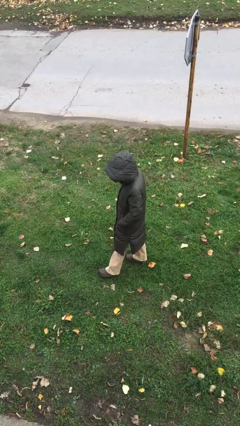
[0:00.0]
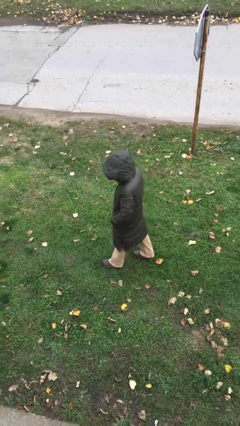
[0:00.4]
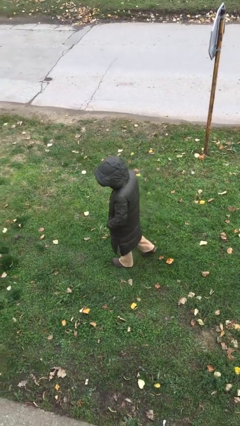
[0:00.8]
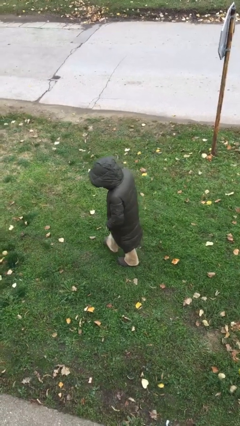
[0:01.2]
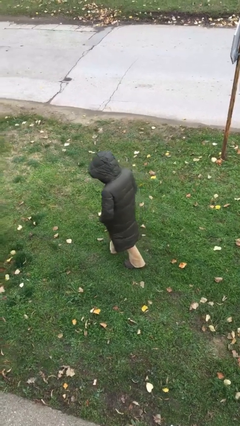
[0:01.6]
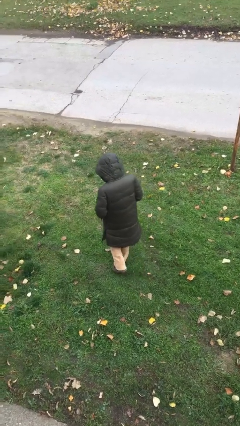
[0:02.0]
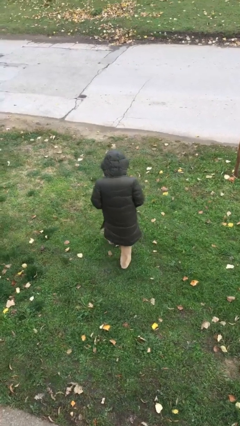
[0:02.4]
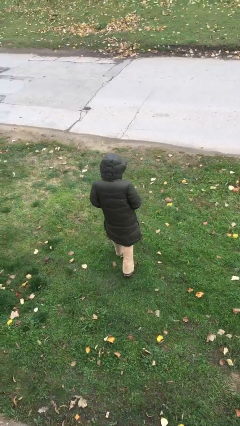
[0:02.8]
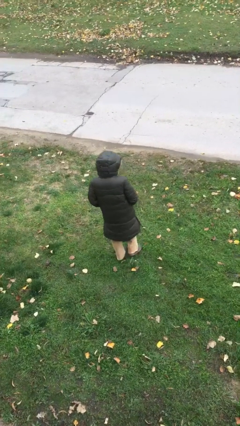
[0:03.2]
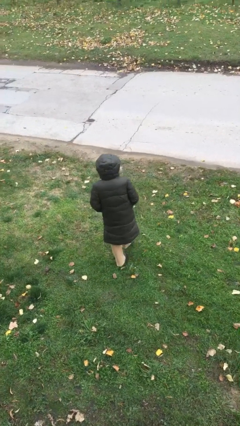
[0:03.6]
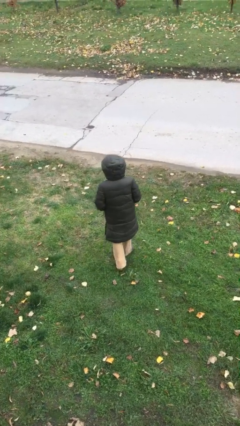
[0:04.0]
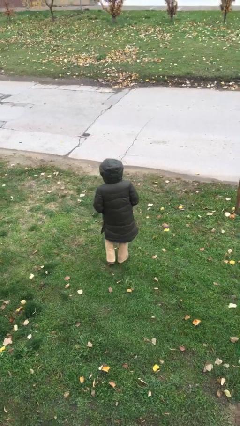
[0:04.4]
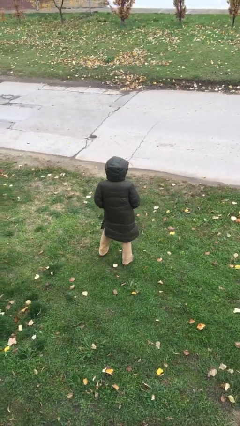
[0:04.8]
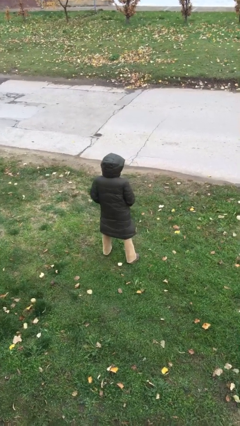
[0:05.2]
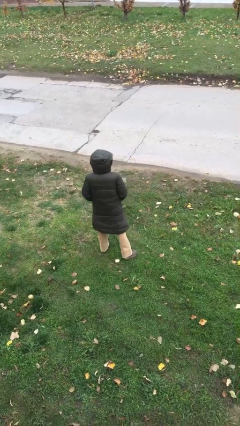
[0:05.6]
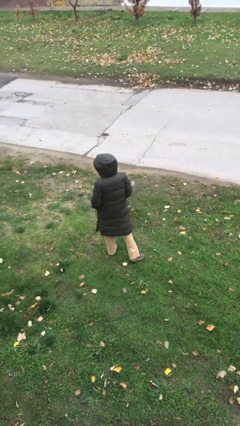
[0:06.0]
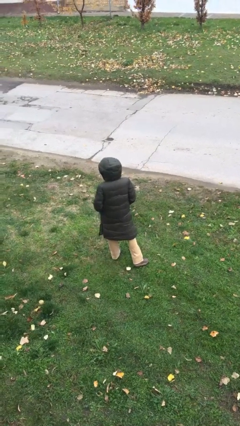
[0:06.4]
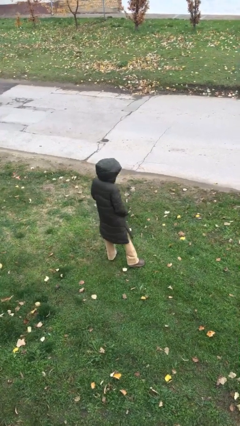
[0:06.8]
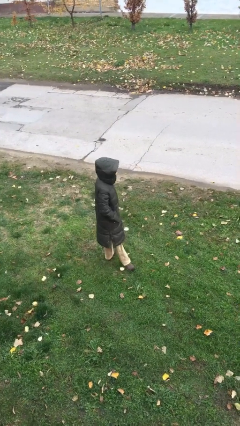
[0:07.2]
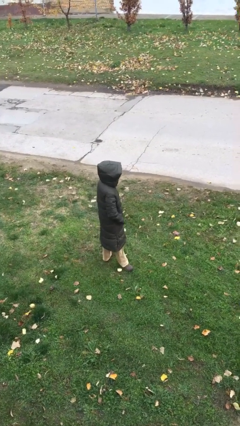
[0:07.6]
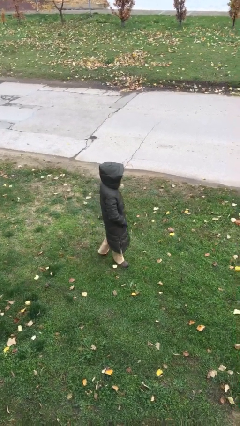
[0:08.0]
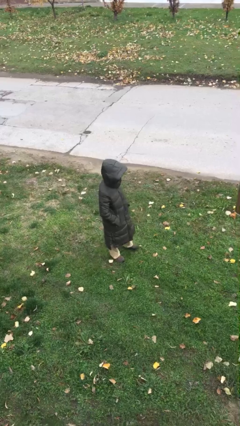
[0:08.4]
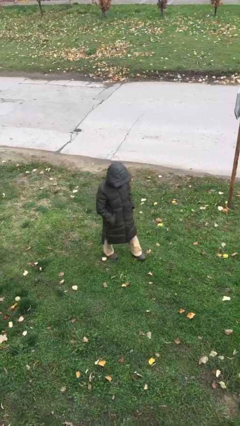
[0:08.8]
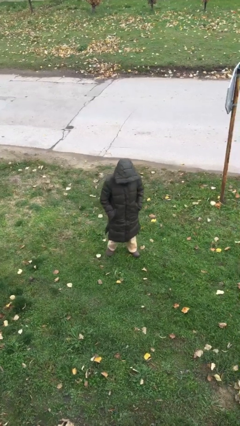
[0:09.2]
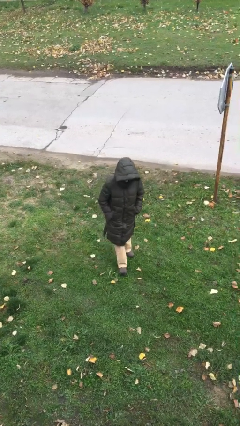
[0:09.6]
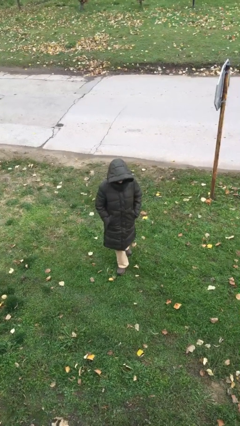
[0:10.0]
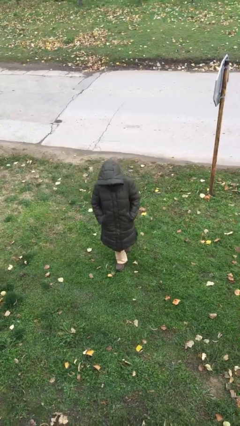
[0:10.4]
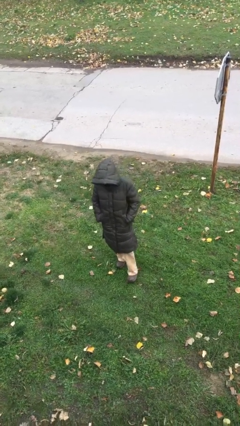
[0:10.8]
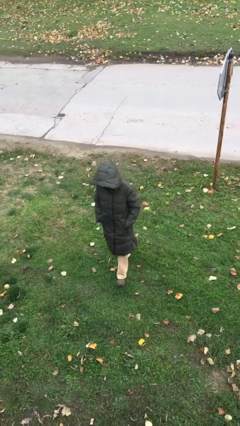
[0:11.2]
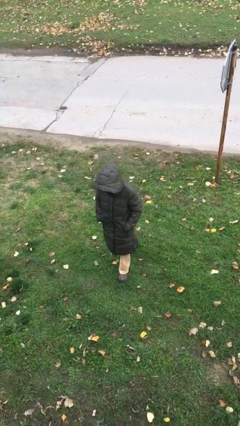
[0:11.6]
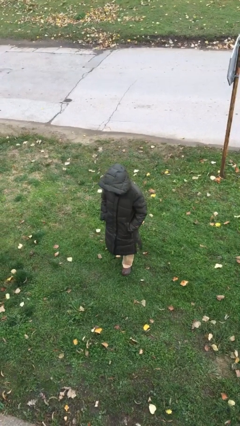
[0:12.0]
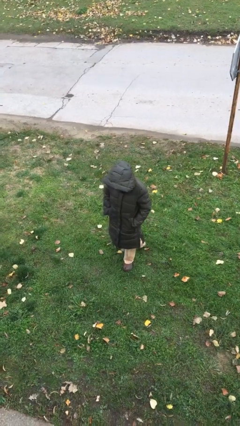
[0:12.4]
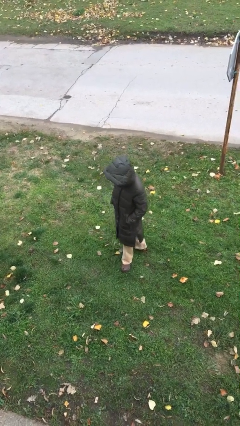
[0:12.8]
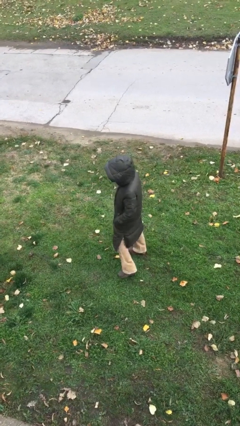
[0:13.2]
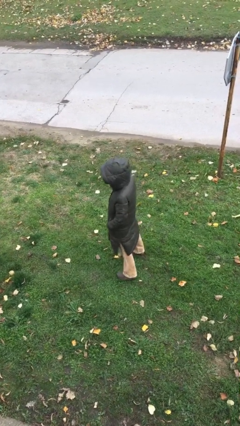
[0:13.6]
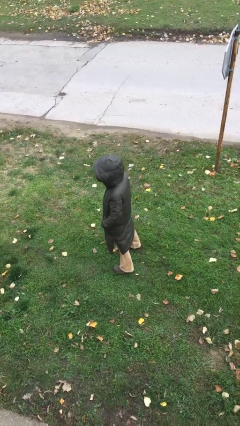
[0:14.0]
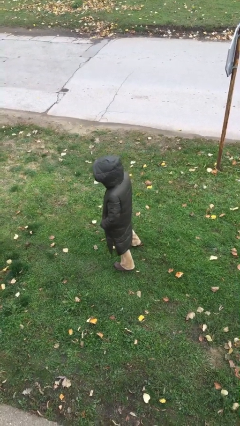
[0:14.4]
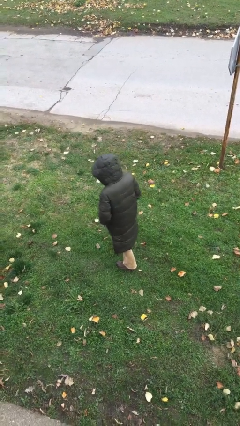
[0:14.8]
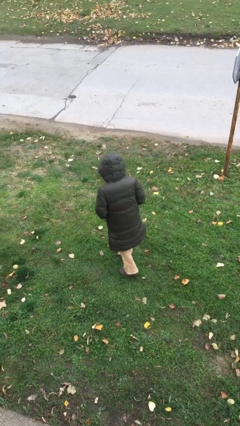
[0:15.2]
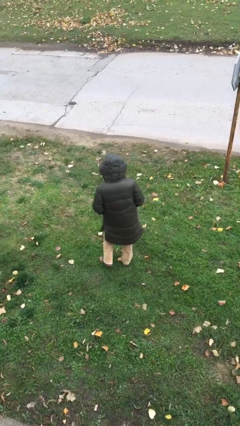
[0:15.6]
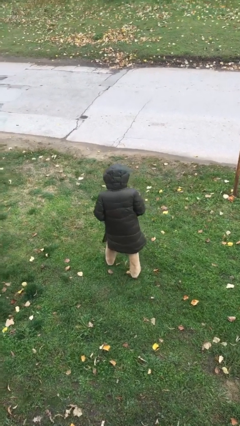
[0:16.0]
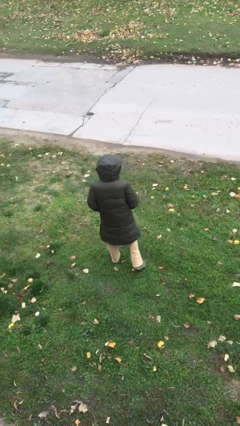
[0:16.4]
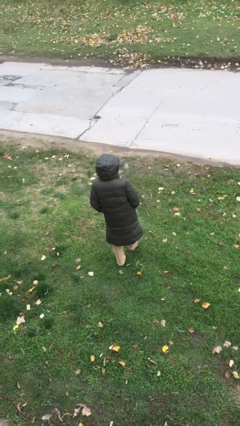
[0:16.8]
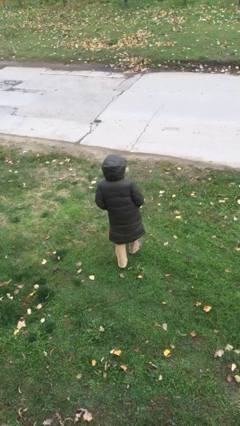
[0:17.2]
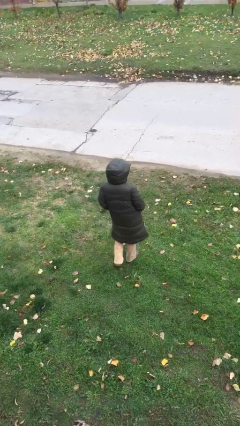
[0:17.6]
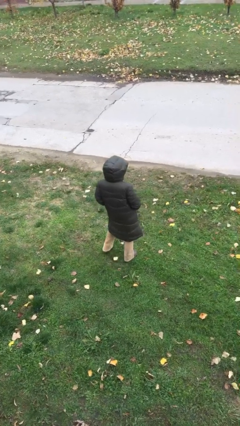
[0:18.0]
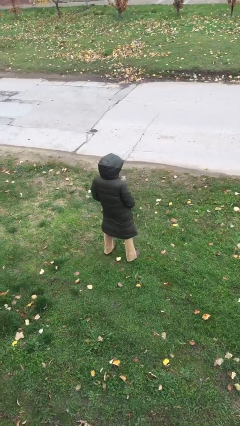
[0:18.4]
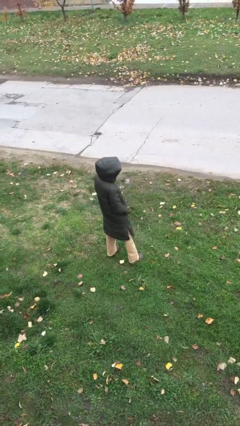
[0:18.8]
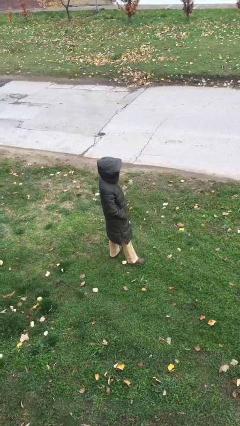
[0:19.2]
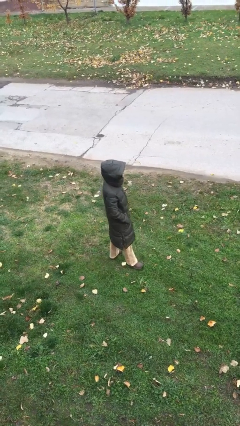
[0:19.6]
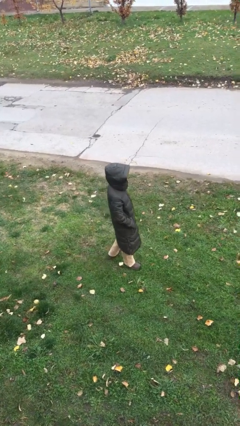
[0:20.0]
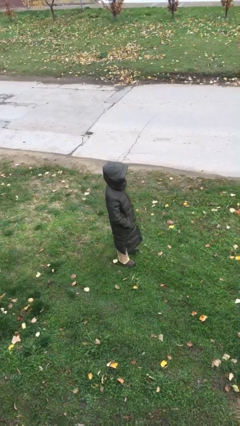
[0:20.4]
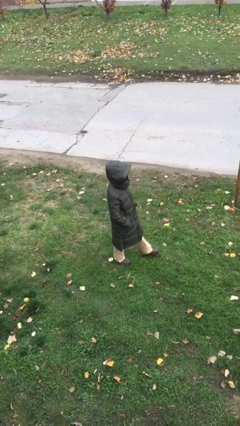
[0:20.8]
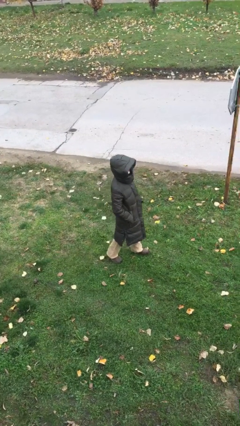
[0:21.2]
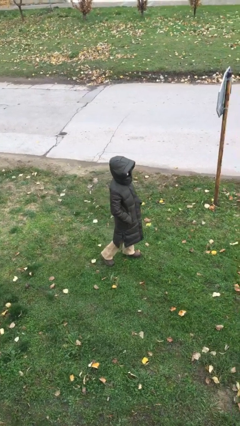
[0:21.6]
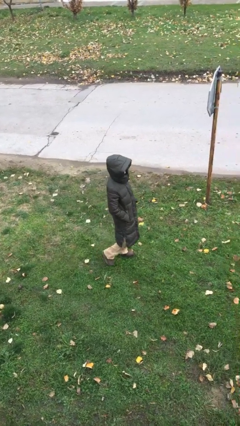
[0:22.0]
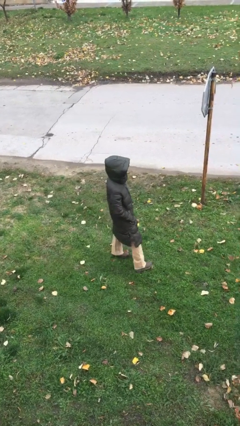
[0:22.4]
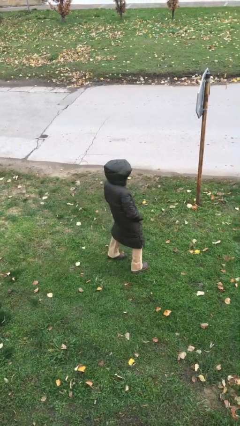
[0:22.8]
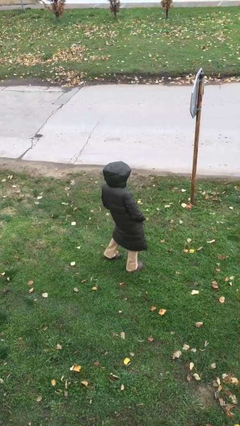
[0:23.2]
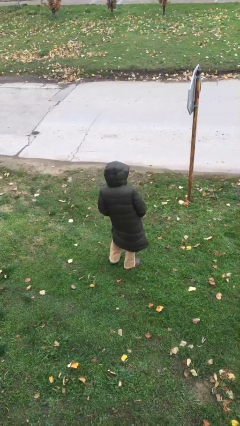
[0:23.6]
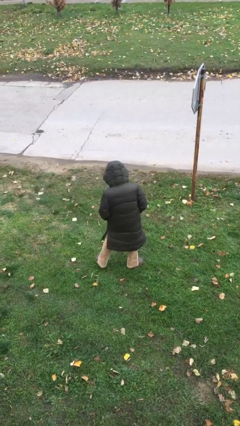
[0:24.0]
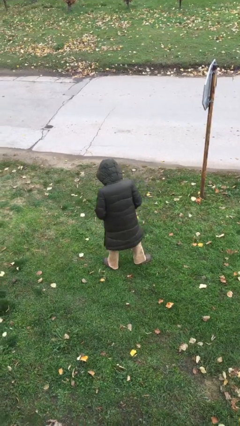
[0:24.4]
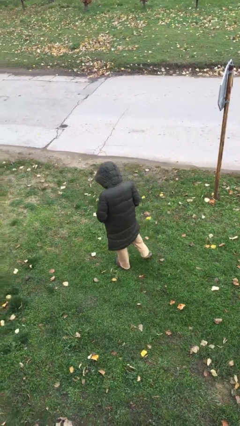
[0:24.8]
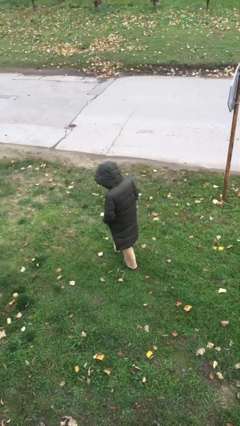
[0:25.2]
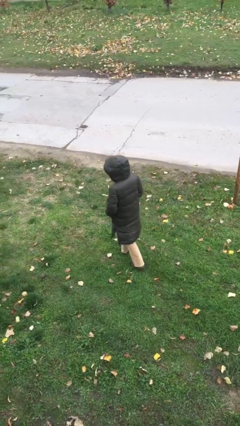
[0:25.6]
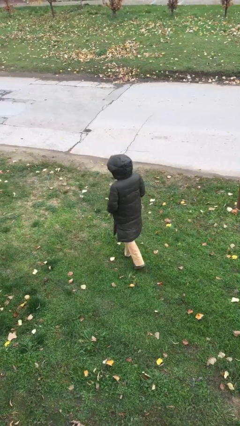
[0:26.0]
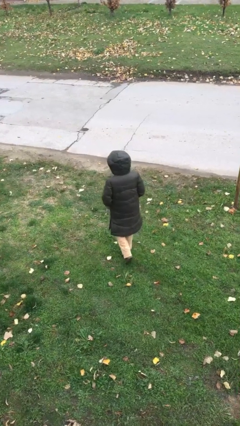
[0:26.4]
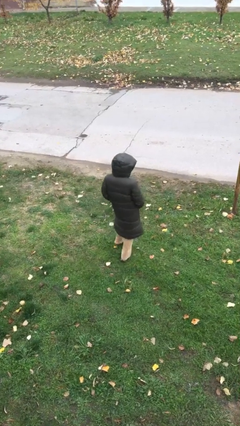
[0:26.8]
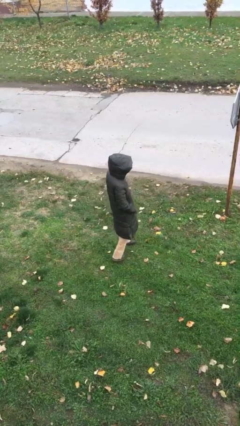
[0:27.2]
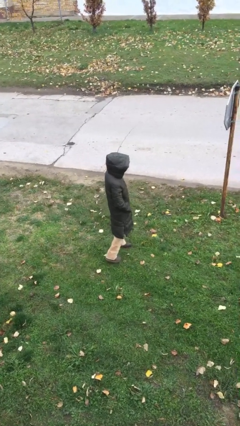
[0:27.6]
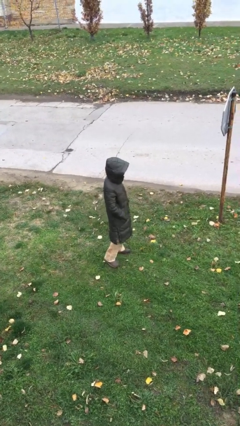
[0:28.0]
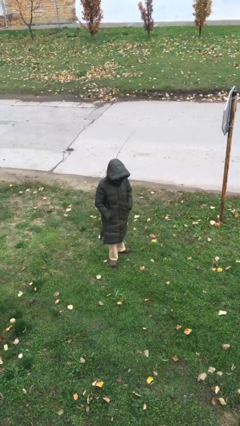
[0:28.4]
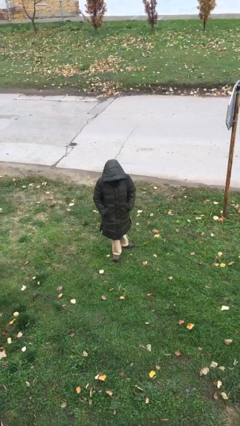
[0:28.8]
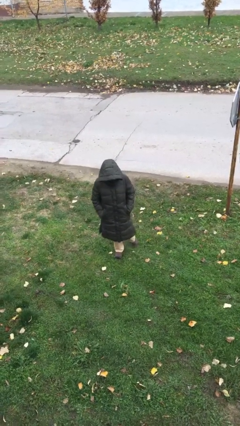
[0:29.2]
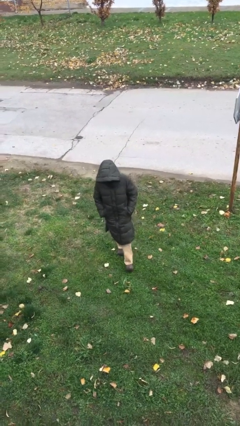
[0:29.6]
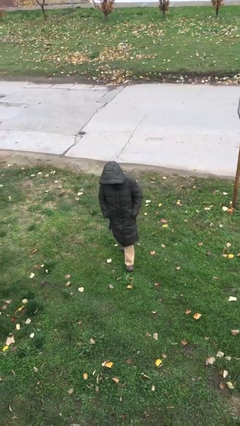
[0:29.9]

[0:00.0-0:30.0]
person walks

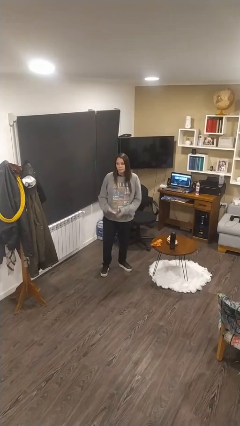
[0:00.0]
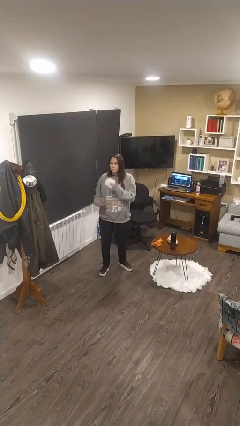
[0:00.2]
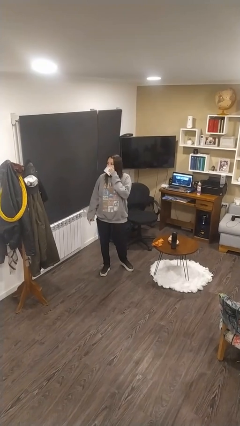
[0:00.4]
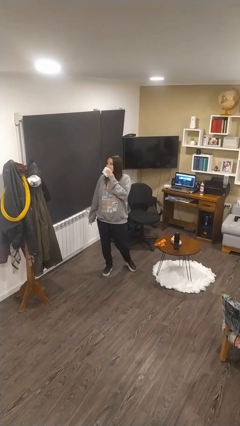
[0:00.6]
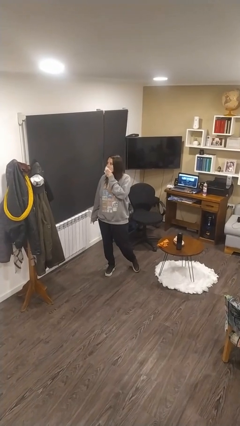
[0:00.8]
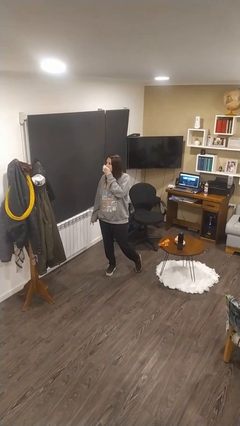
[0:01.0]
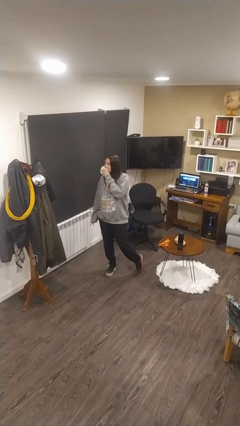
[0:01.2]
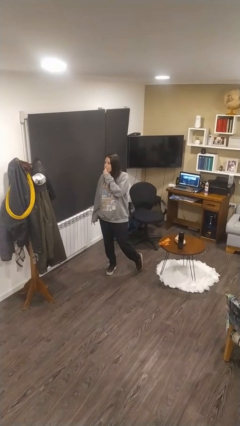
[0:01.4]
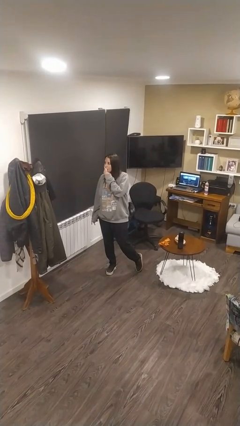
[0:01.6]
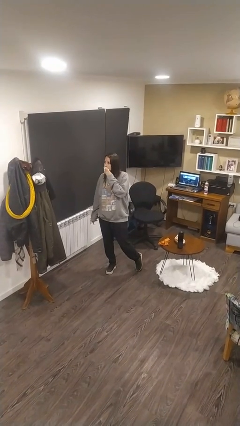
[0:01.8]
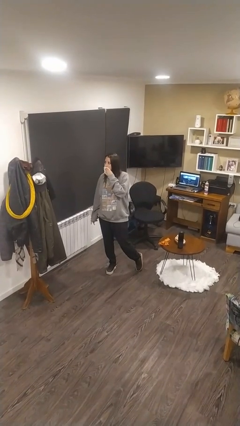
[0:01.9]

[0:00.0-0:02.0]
person wipes mouth with napkin

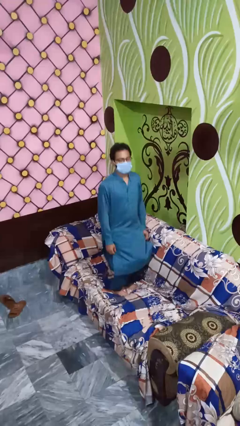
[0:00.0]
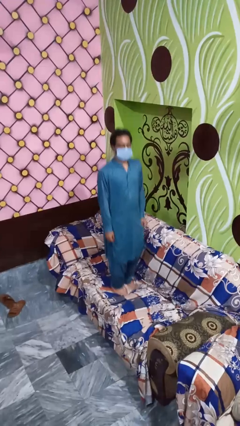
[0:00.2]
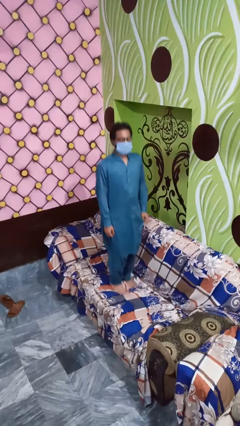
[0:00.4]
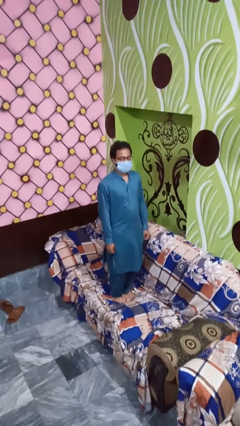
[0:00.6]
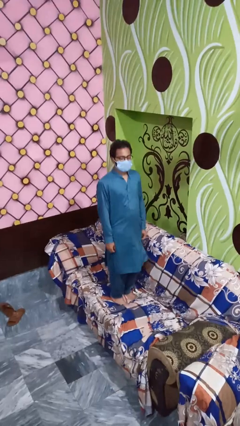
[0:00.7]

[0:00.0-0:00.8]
person jumps on couch
